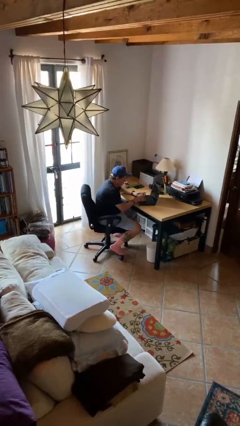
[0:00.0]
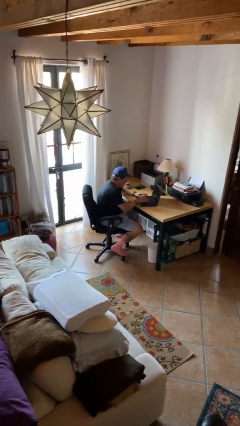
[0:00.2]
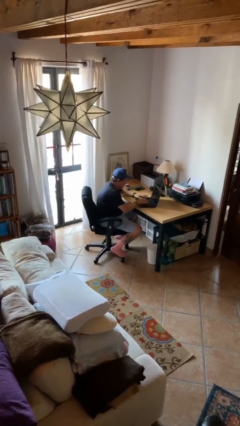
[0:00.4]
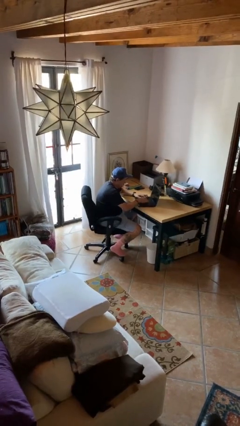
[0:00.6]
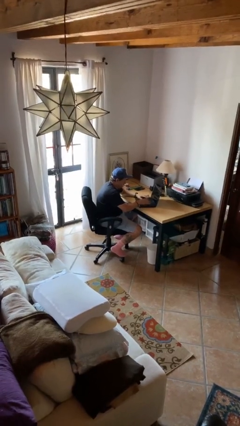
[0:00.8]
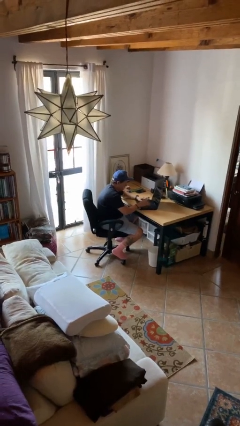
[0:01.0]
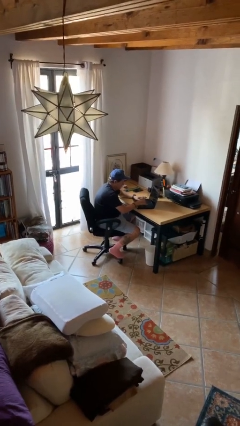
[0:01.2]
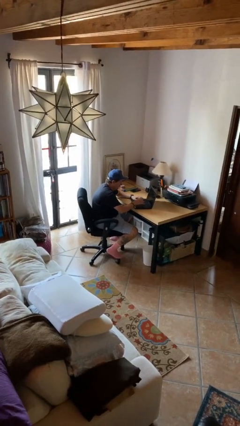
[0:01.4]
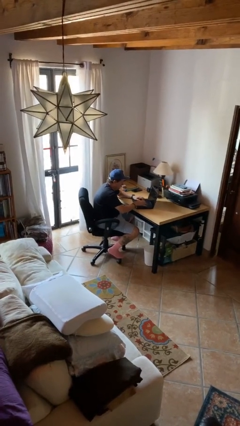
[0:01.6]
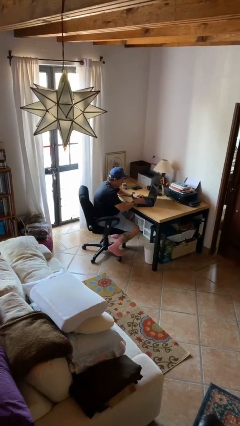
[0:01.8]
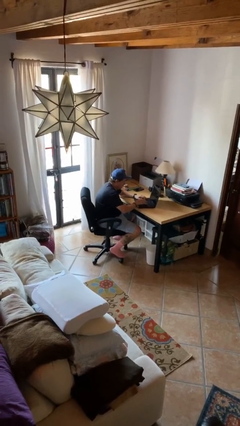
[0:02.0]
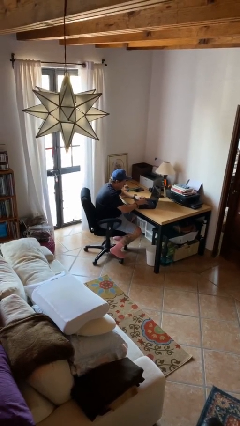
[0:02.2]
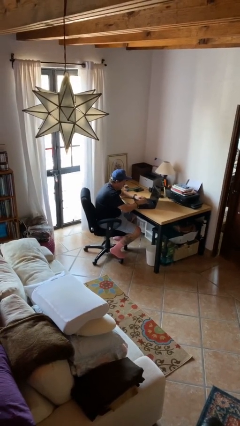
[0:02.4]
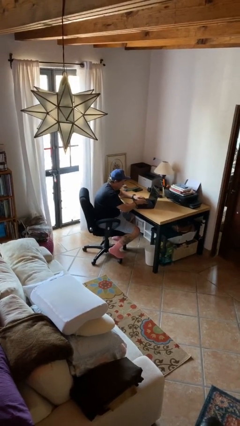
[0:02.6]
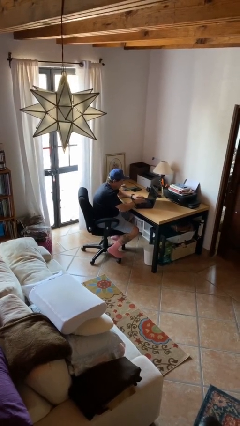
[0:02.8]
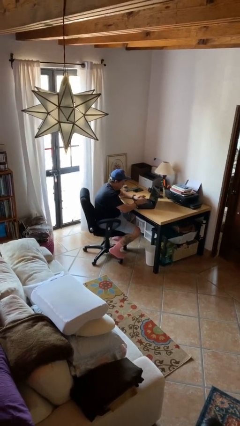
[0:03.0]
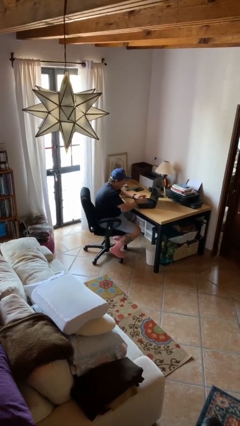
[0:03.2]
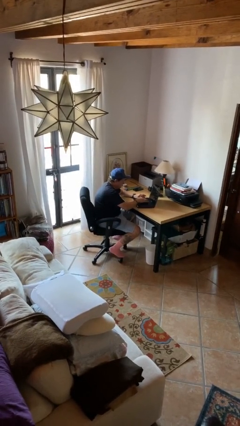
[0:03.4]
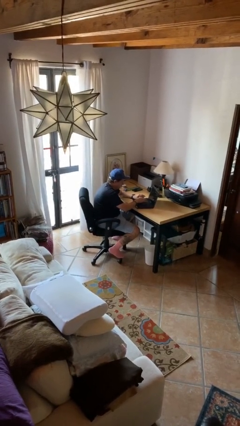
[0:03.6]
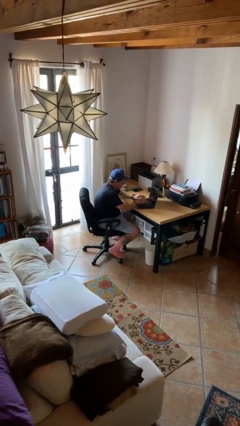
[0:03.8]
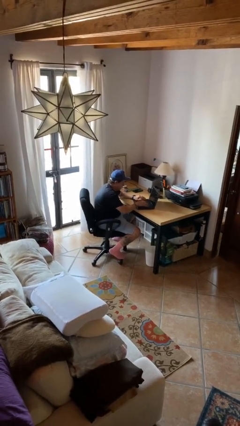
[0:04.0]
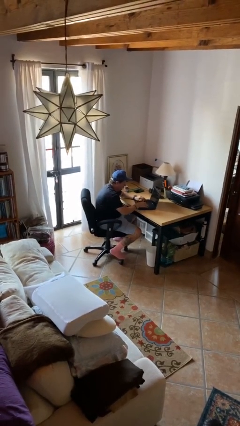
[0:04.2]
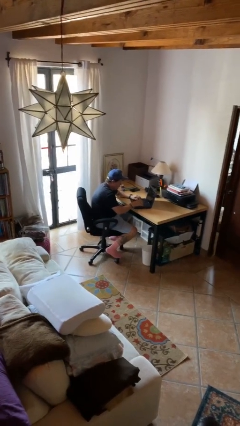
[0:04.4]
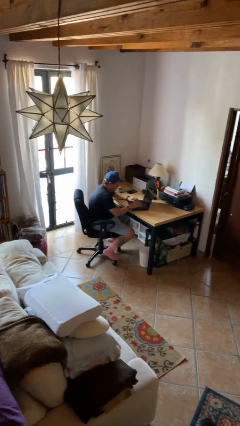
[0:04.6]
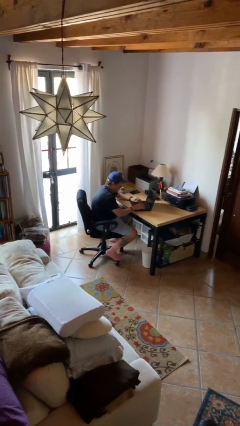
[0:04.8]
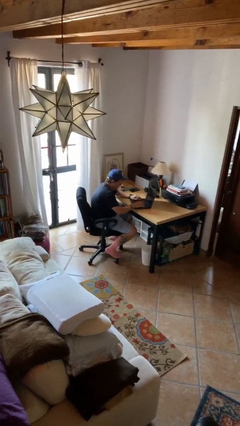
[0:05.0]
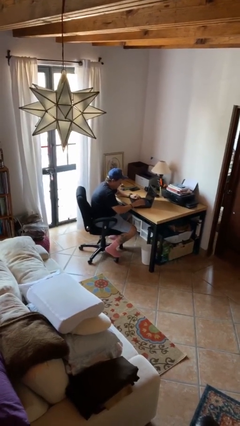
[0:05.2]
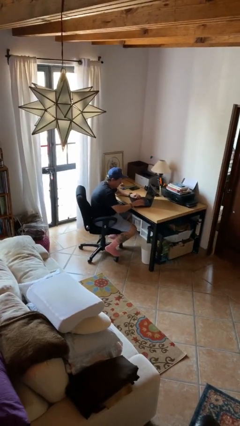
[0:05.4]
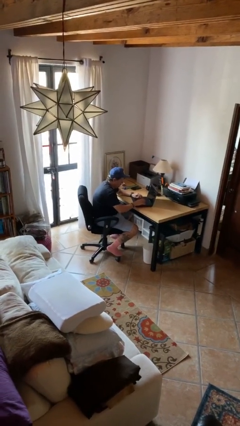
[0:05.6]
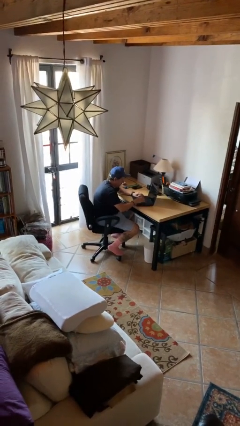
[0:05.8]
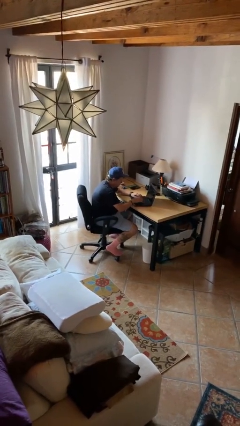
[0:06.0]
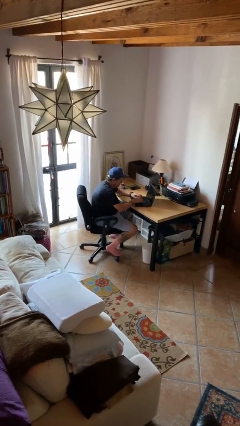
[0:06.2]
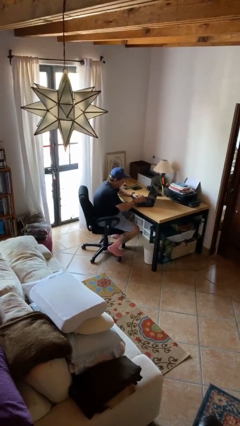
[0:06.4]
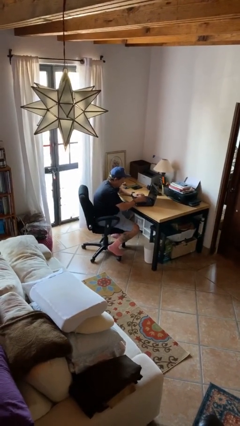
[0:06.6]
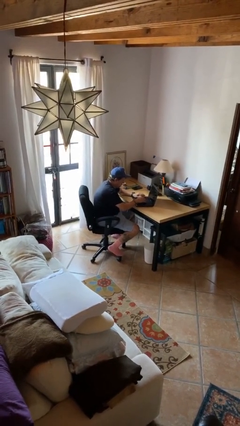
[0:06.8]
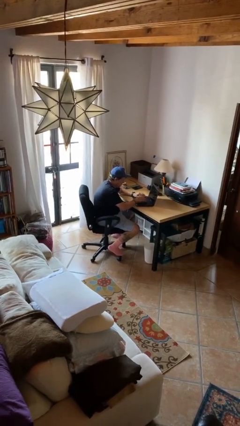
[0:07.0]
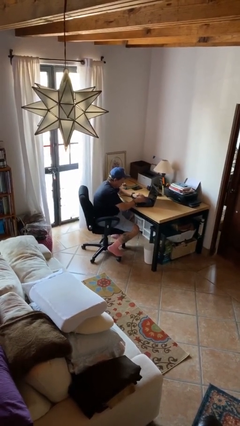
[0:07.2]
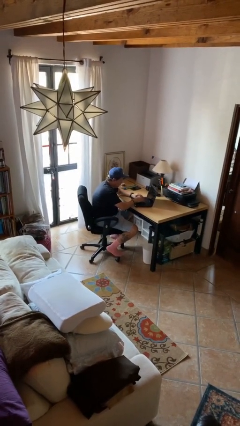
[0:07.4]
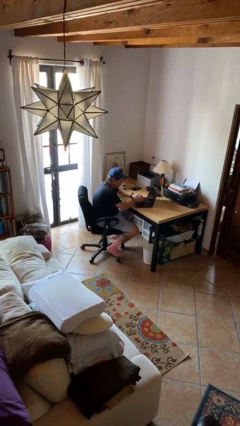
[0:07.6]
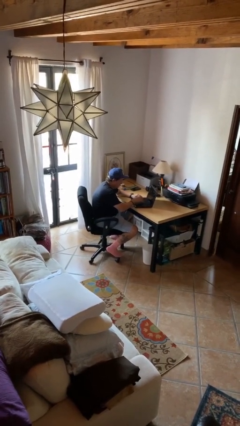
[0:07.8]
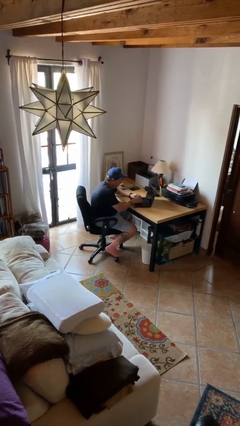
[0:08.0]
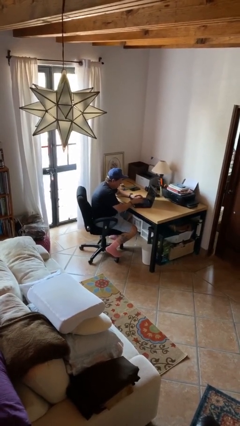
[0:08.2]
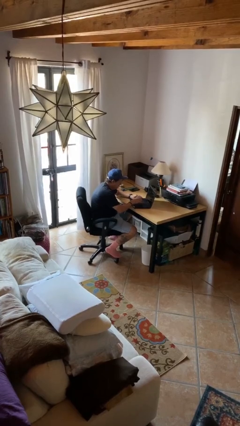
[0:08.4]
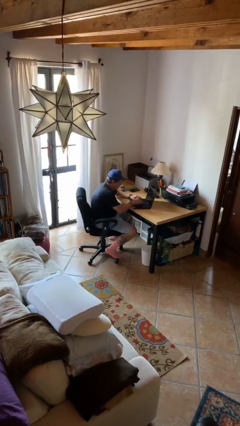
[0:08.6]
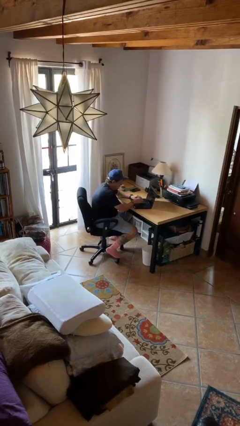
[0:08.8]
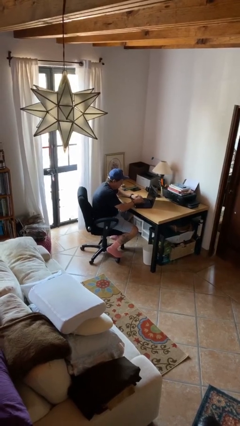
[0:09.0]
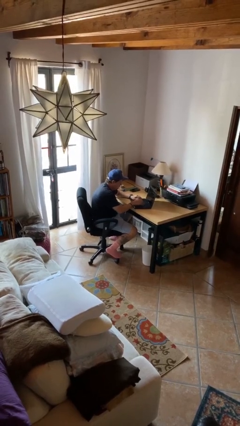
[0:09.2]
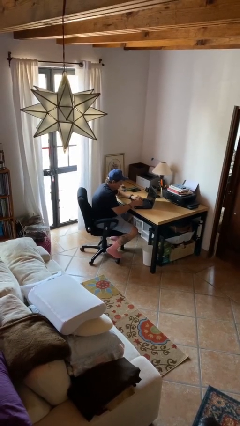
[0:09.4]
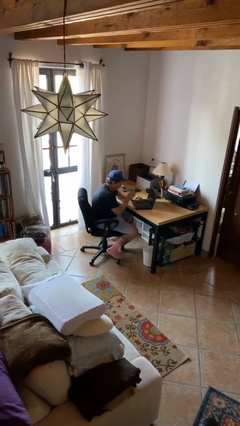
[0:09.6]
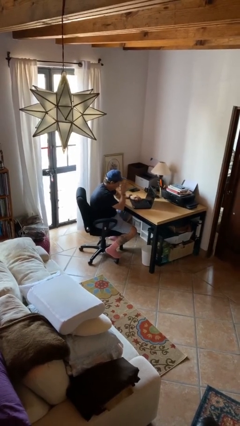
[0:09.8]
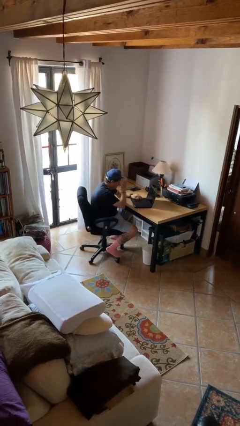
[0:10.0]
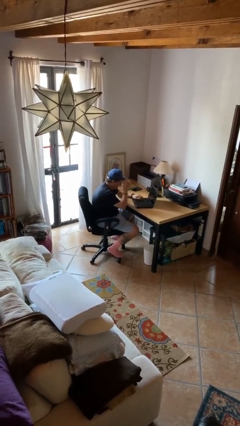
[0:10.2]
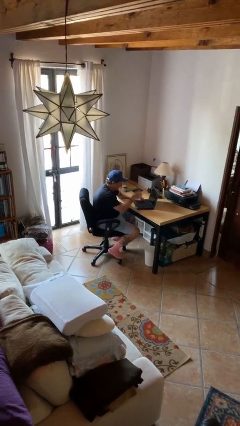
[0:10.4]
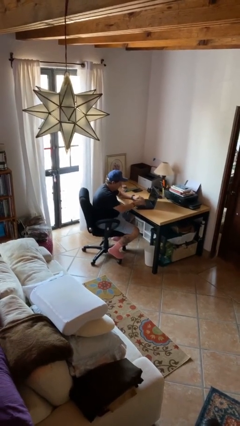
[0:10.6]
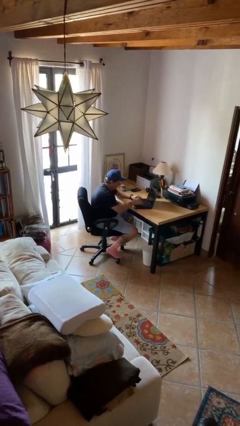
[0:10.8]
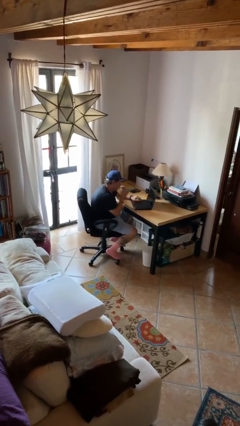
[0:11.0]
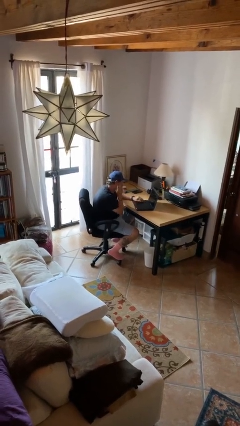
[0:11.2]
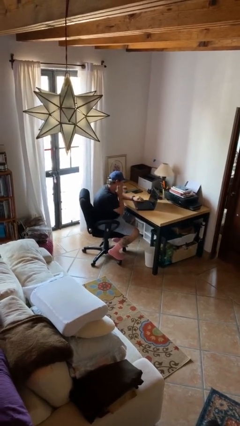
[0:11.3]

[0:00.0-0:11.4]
person interacts with laptop

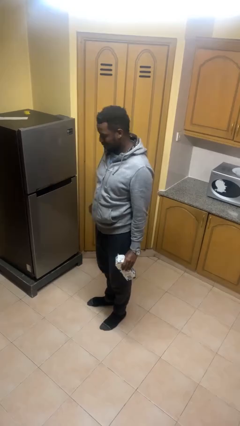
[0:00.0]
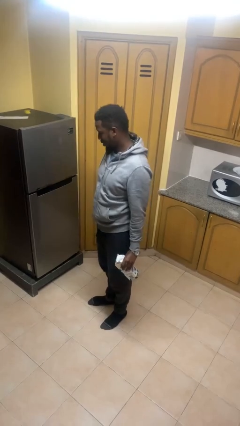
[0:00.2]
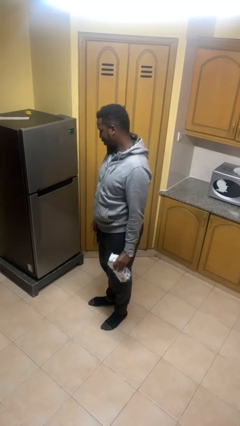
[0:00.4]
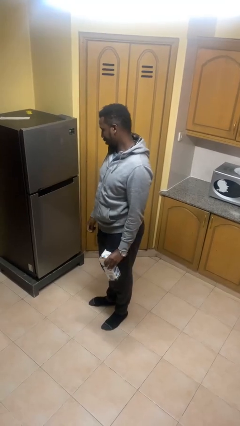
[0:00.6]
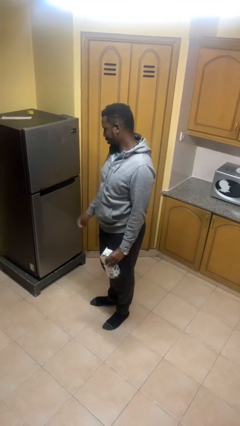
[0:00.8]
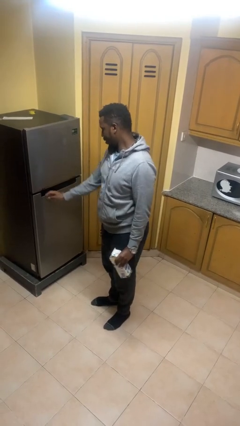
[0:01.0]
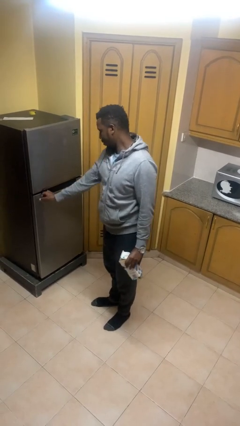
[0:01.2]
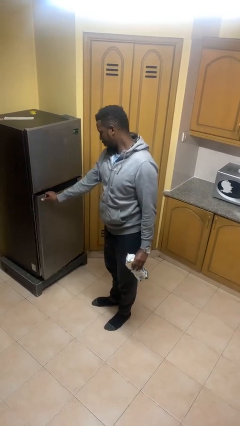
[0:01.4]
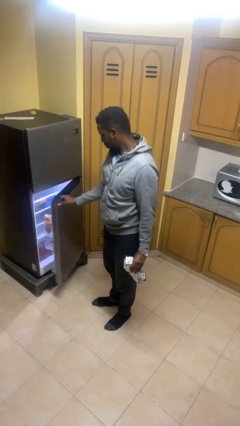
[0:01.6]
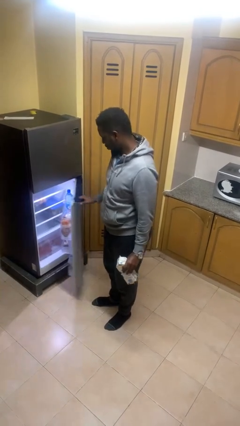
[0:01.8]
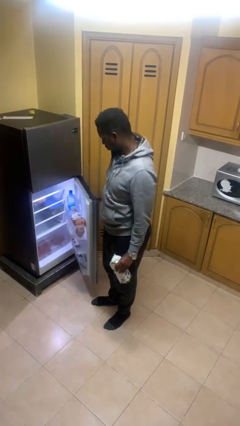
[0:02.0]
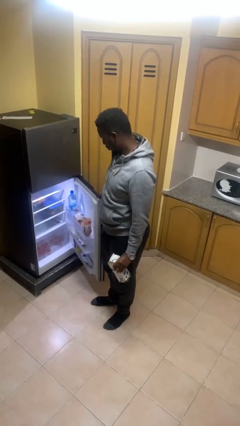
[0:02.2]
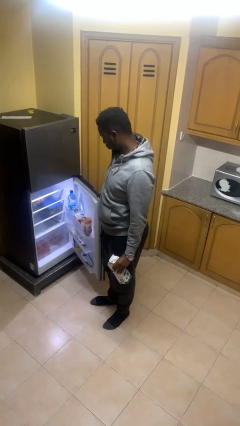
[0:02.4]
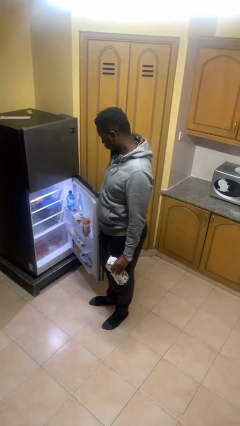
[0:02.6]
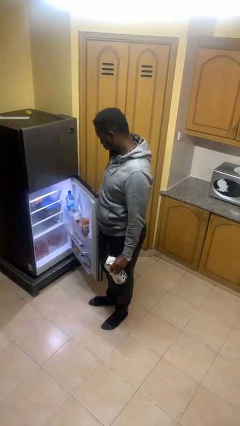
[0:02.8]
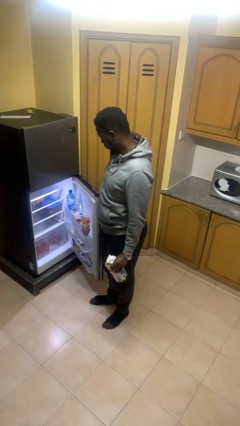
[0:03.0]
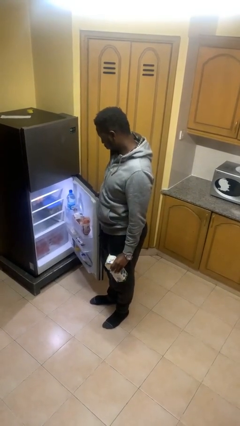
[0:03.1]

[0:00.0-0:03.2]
person opens refrigerator

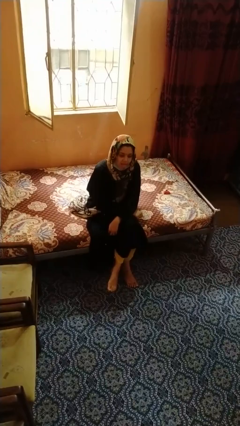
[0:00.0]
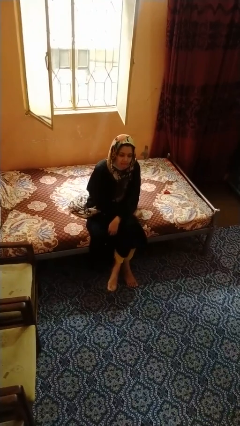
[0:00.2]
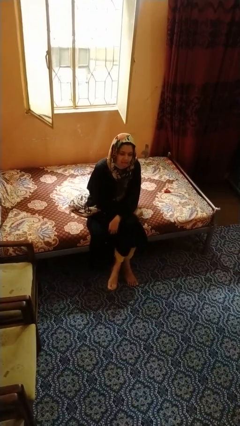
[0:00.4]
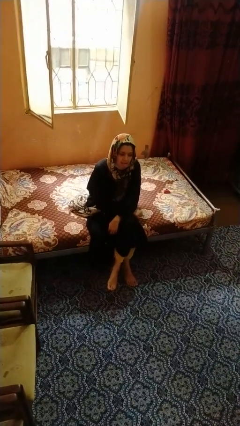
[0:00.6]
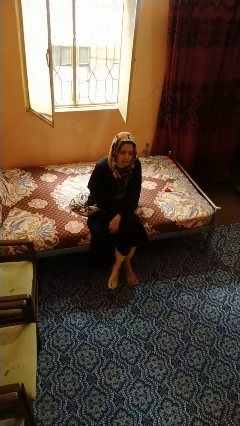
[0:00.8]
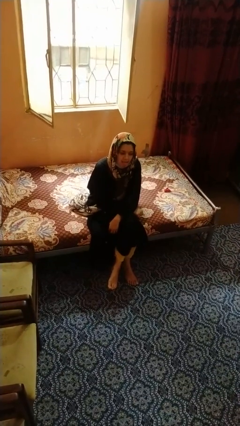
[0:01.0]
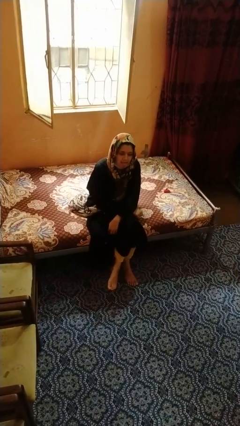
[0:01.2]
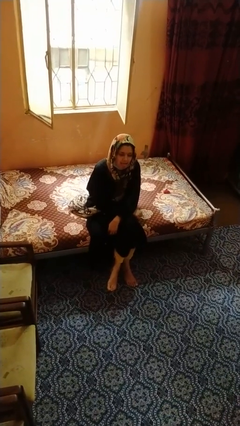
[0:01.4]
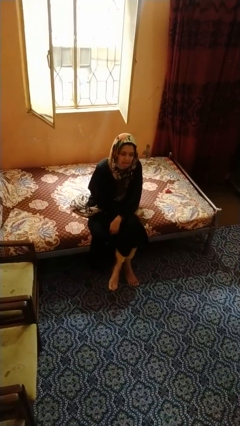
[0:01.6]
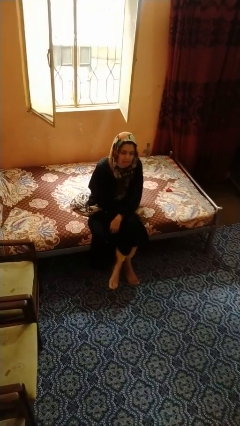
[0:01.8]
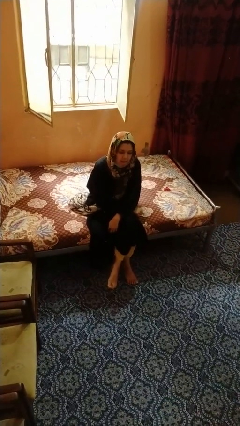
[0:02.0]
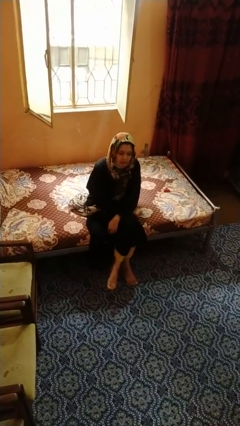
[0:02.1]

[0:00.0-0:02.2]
person sticks out tongue

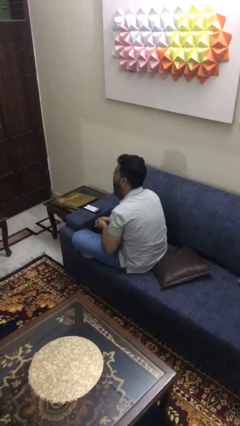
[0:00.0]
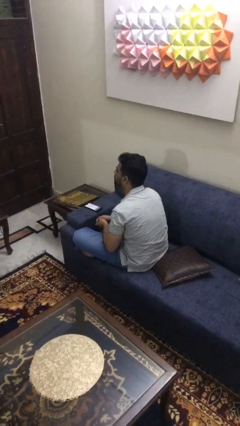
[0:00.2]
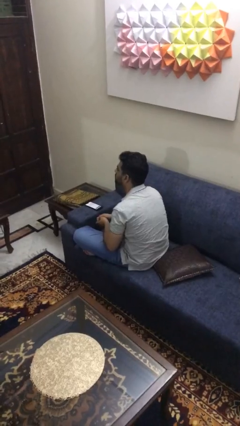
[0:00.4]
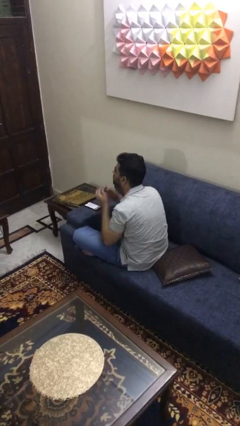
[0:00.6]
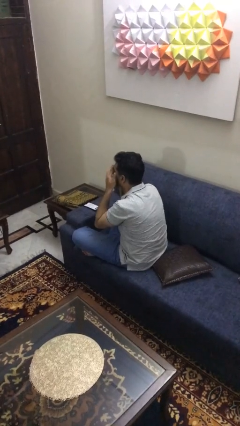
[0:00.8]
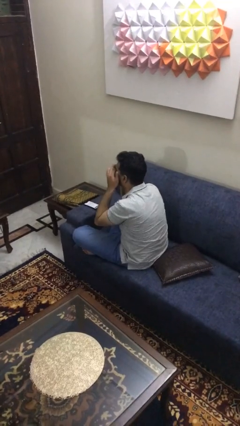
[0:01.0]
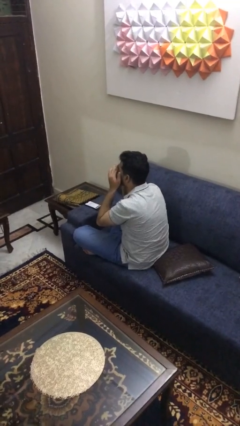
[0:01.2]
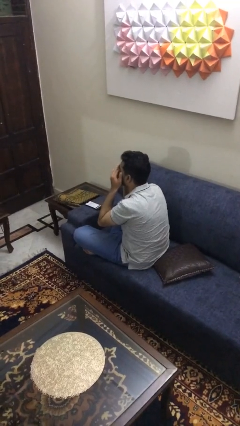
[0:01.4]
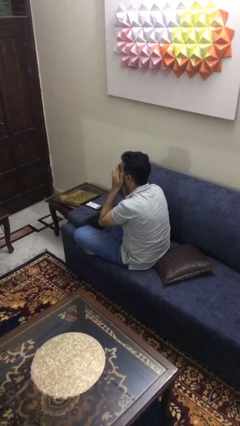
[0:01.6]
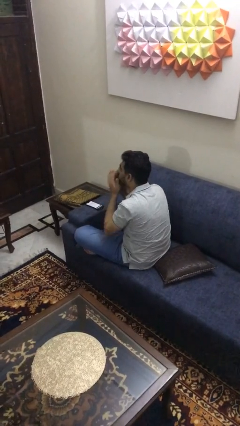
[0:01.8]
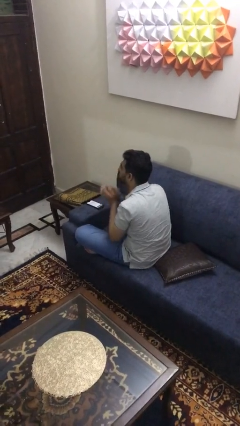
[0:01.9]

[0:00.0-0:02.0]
person rubs eyes
